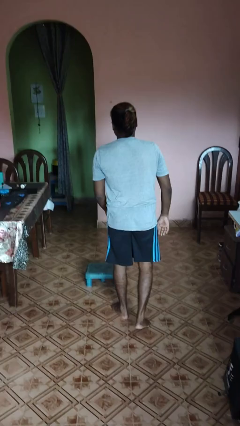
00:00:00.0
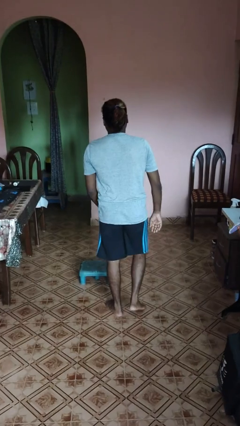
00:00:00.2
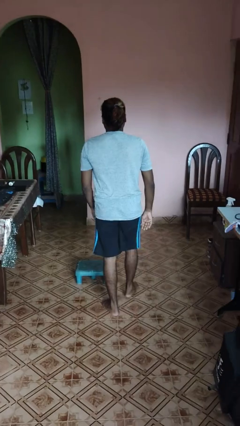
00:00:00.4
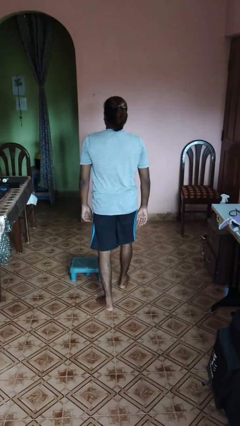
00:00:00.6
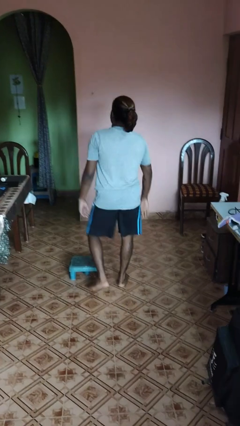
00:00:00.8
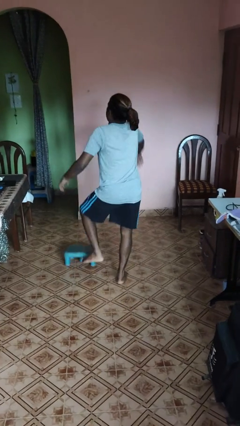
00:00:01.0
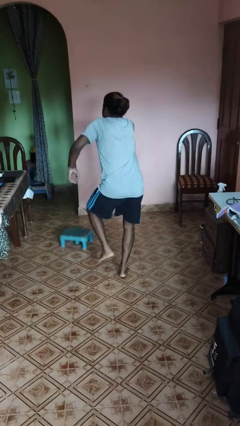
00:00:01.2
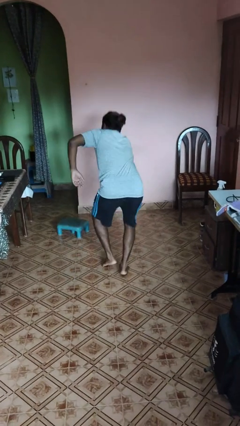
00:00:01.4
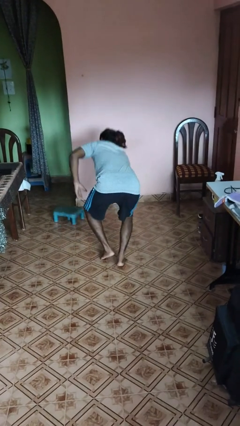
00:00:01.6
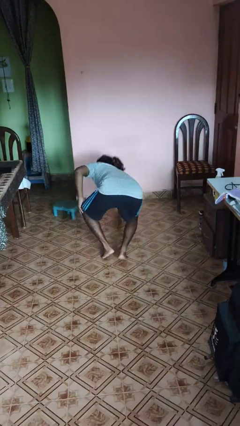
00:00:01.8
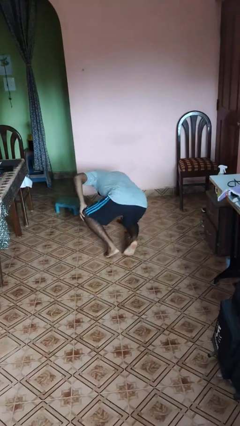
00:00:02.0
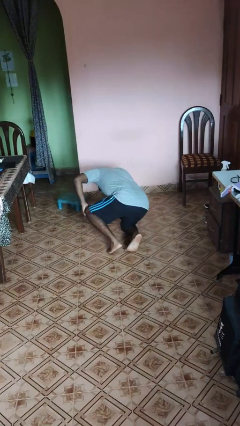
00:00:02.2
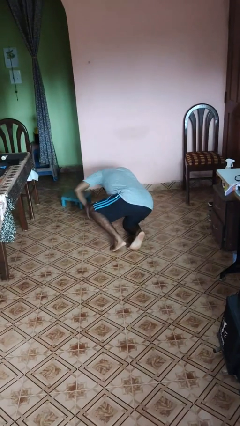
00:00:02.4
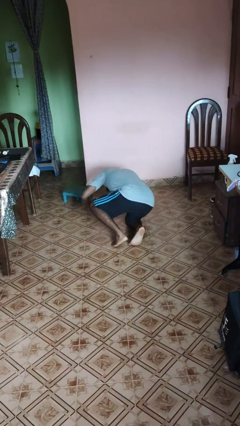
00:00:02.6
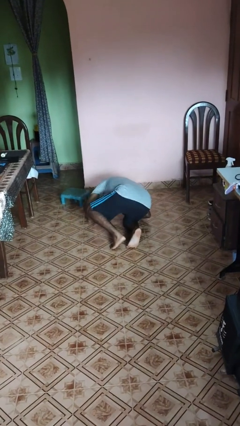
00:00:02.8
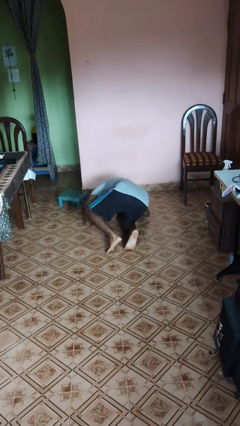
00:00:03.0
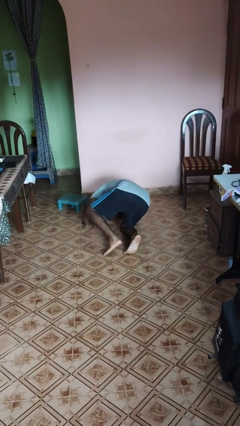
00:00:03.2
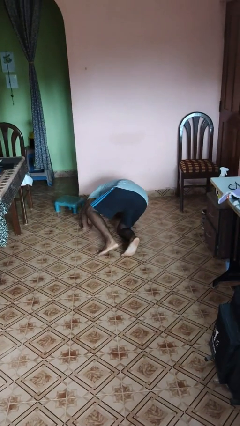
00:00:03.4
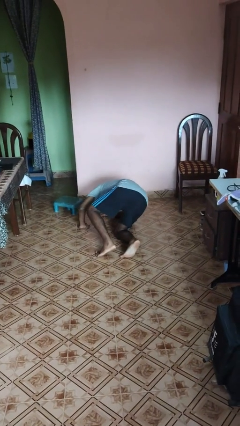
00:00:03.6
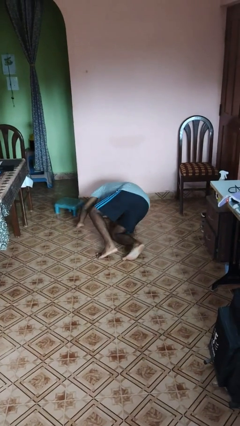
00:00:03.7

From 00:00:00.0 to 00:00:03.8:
person trips on object on floor

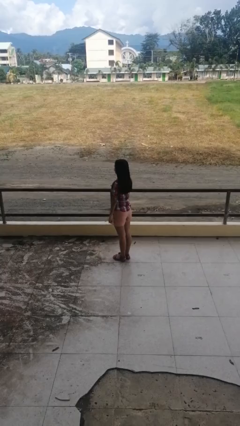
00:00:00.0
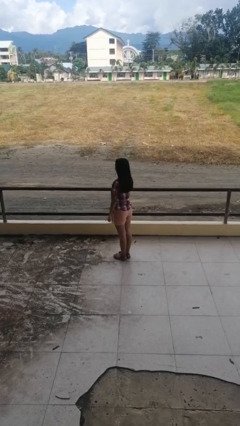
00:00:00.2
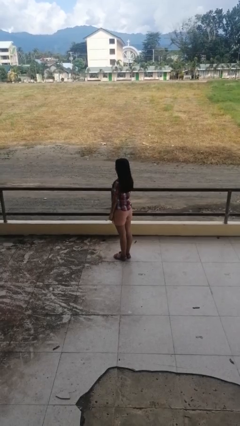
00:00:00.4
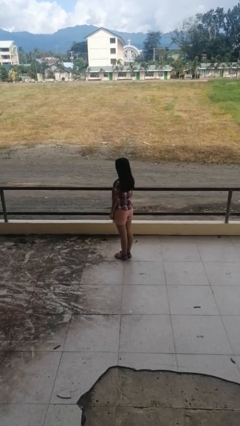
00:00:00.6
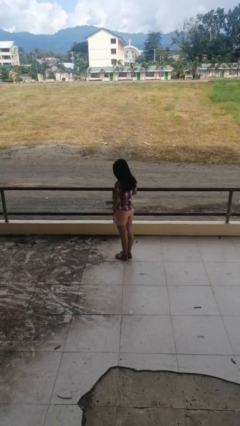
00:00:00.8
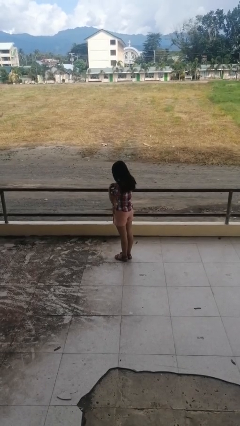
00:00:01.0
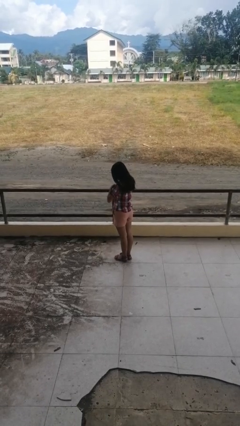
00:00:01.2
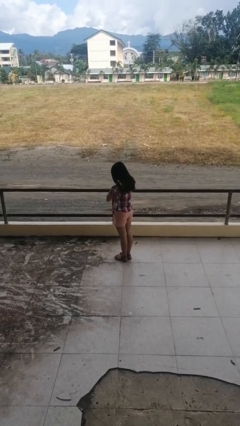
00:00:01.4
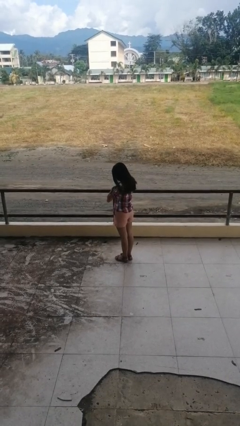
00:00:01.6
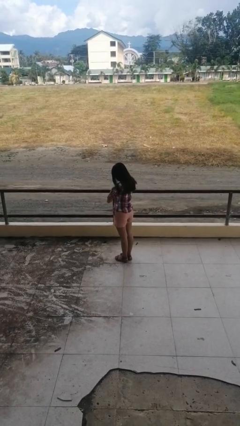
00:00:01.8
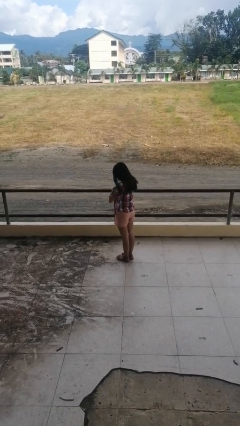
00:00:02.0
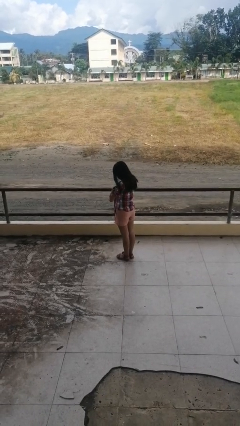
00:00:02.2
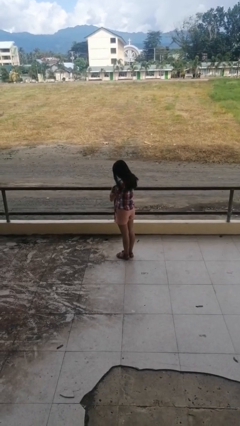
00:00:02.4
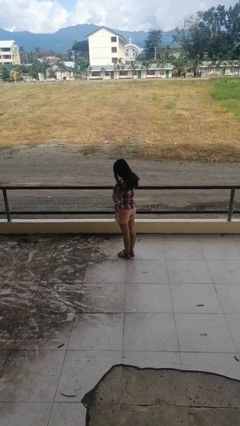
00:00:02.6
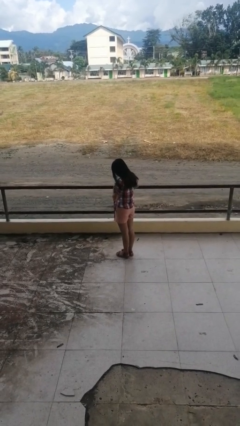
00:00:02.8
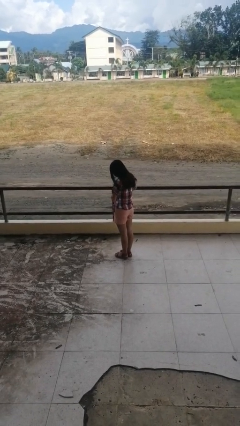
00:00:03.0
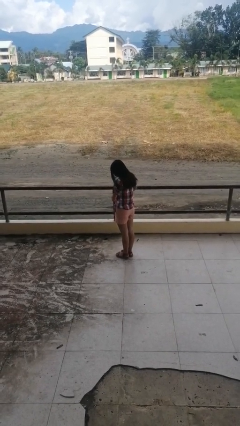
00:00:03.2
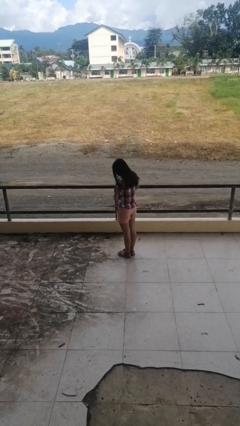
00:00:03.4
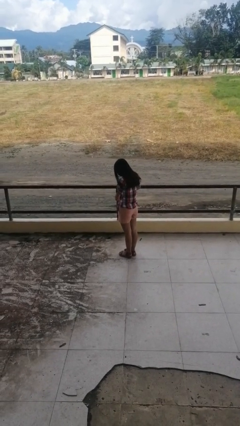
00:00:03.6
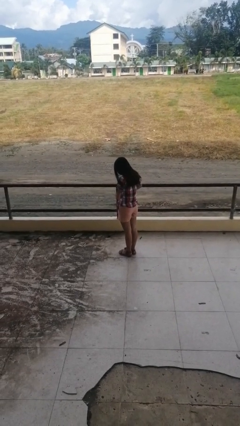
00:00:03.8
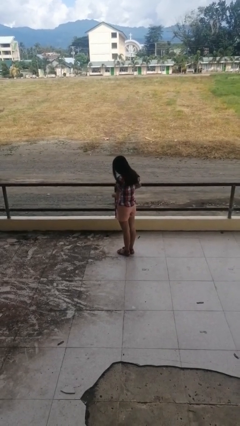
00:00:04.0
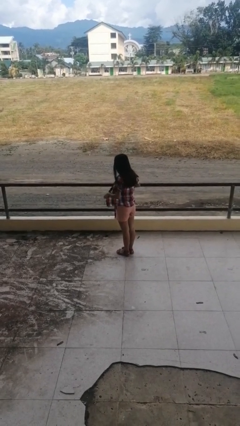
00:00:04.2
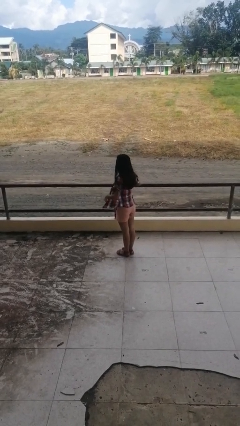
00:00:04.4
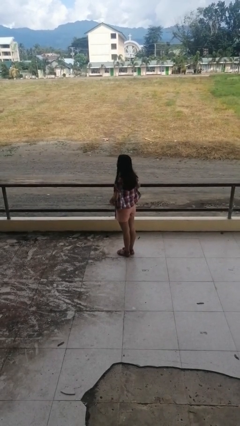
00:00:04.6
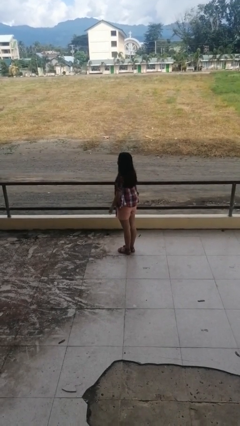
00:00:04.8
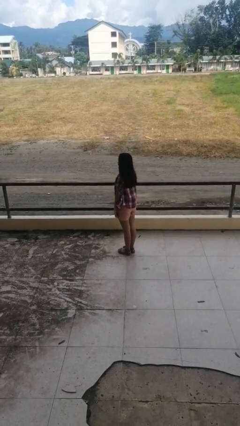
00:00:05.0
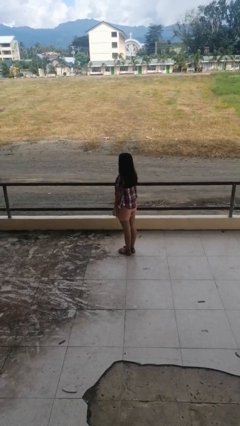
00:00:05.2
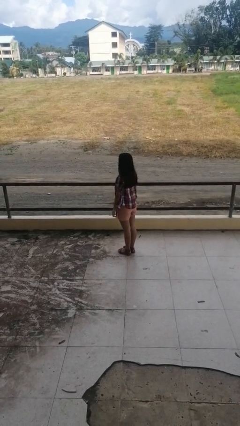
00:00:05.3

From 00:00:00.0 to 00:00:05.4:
person unbuttons shirt

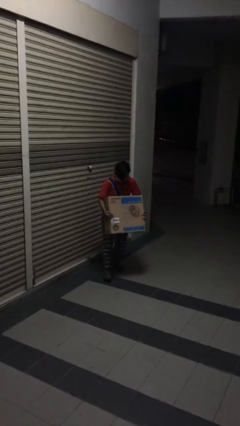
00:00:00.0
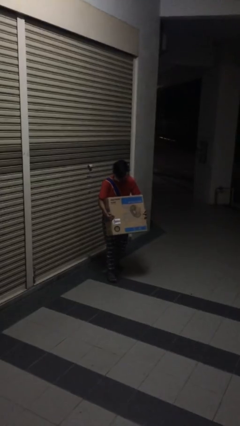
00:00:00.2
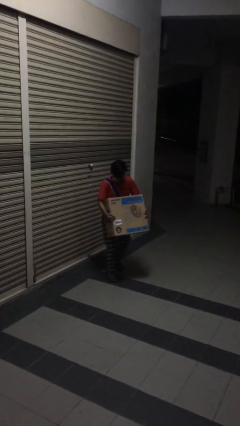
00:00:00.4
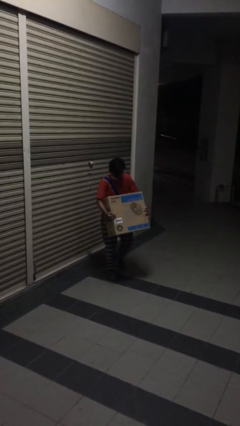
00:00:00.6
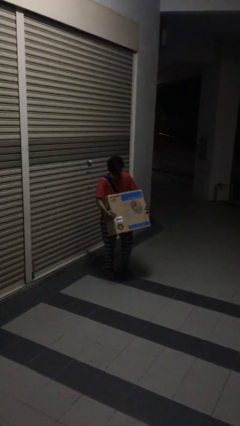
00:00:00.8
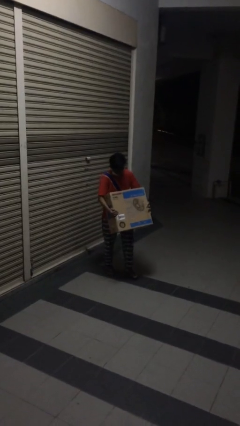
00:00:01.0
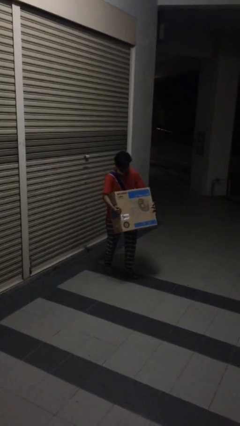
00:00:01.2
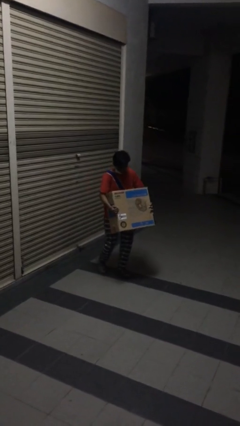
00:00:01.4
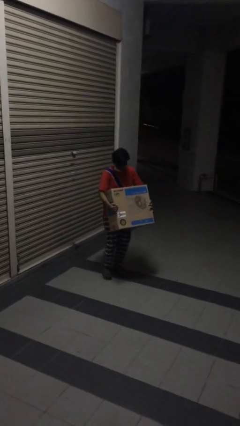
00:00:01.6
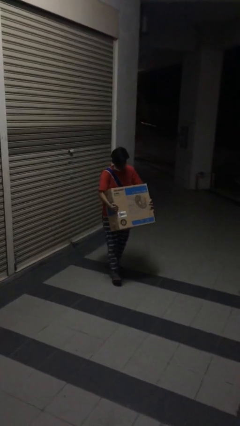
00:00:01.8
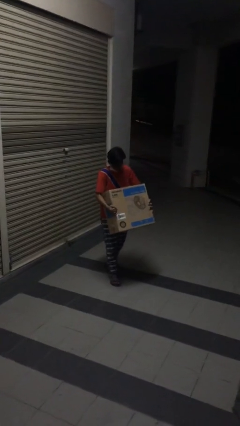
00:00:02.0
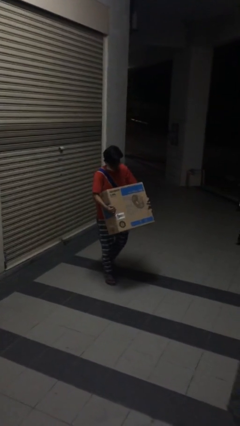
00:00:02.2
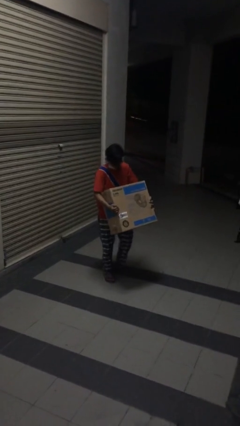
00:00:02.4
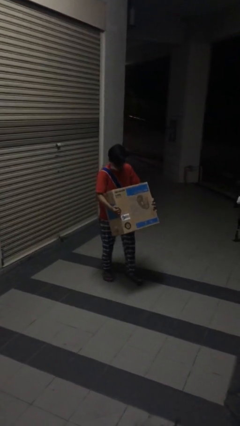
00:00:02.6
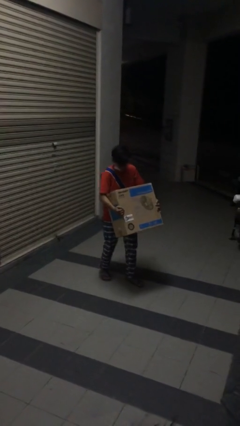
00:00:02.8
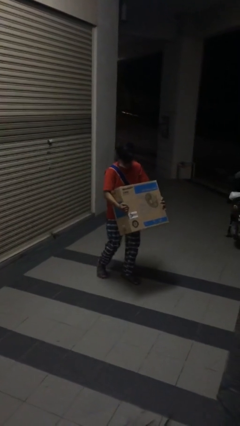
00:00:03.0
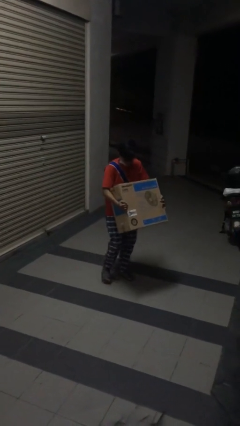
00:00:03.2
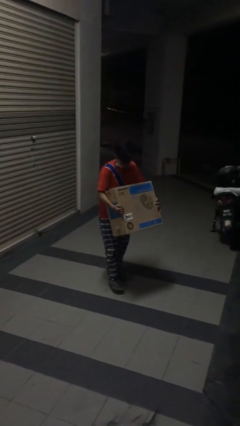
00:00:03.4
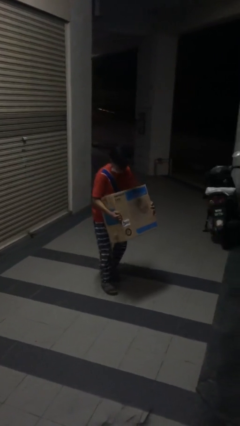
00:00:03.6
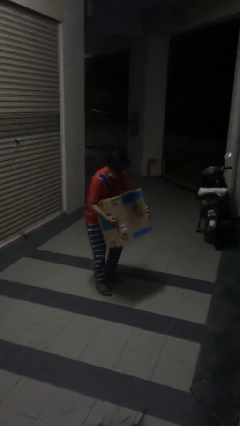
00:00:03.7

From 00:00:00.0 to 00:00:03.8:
person carries heavy object

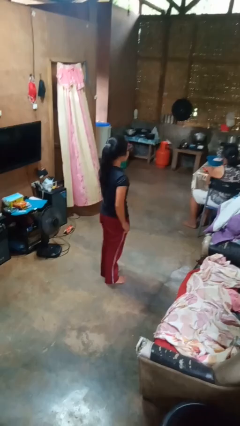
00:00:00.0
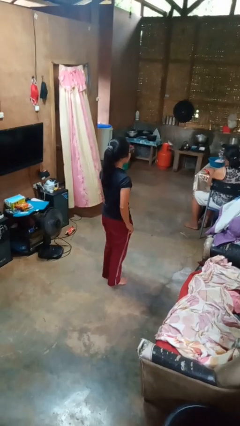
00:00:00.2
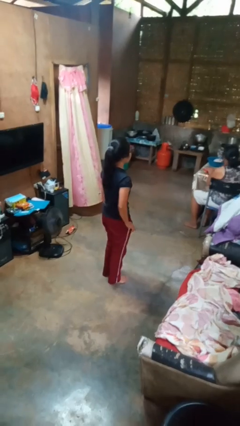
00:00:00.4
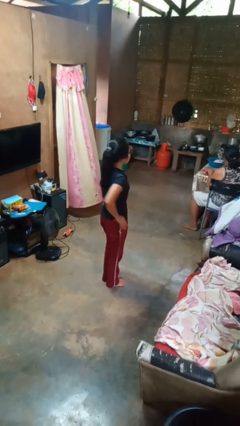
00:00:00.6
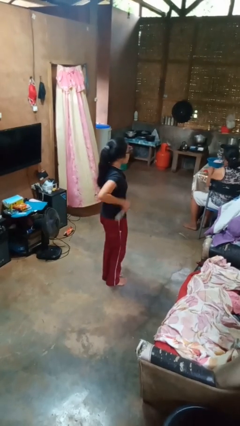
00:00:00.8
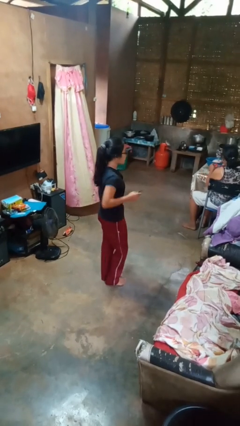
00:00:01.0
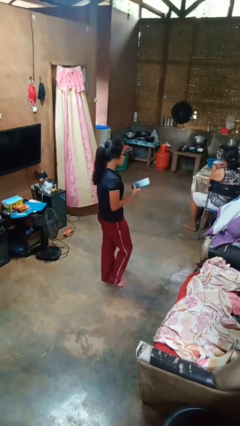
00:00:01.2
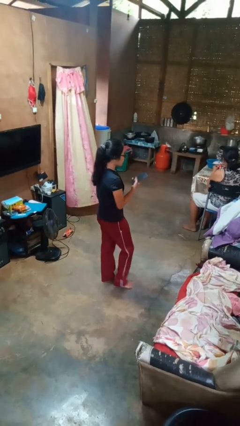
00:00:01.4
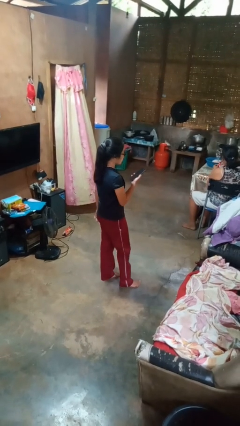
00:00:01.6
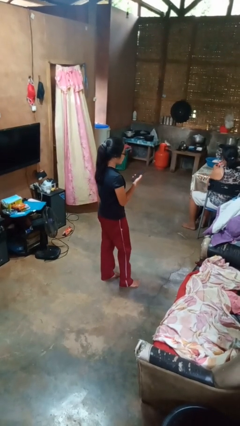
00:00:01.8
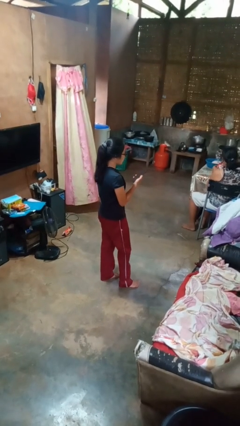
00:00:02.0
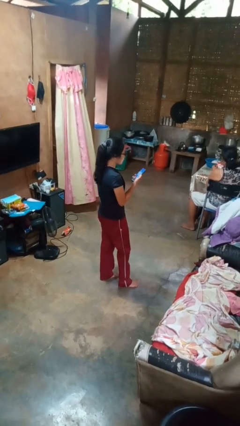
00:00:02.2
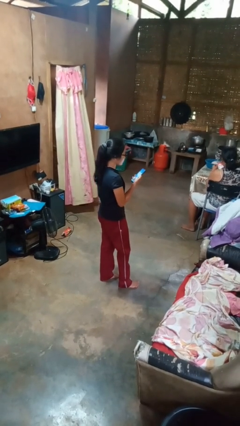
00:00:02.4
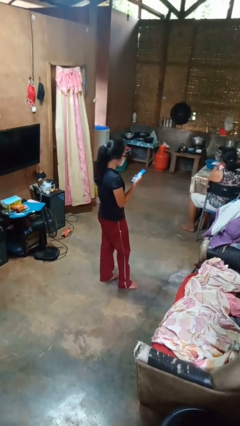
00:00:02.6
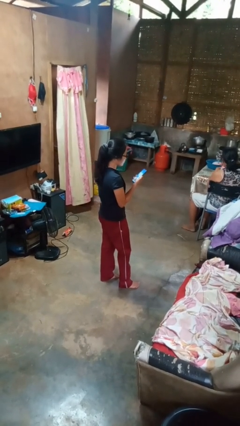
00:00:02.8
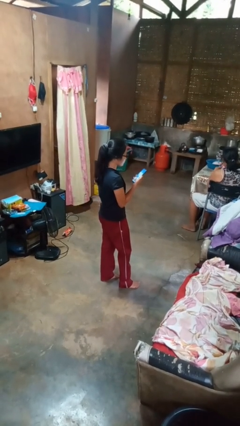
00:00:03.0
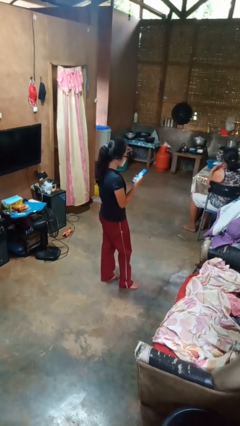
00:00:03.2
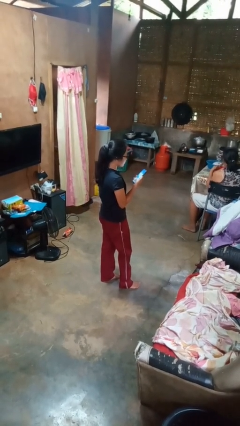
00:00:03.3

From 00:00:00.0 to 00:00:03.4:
person takes phone from pocket

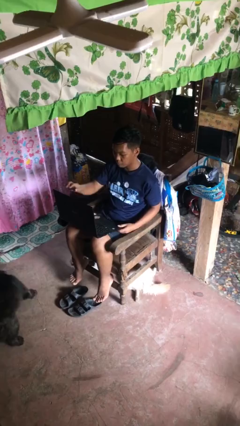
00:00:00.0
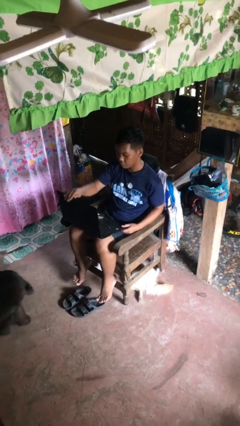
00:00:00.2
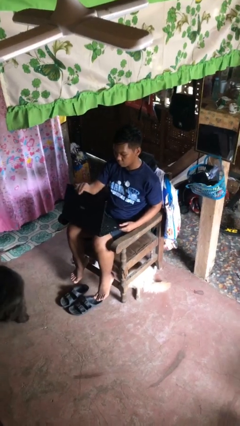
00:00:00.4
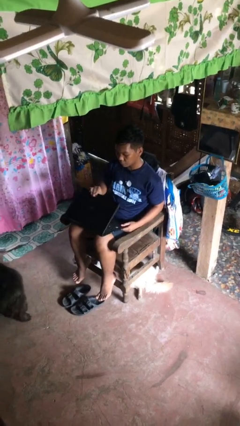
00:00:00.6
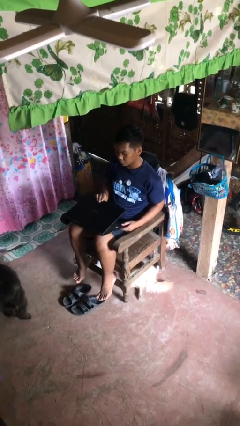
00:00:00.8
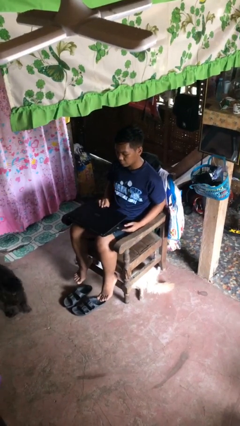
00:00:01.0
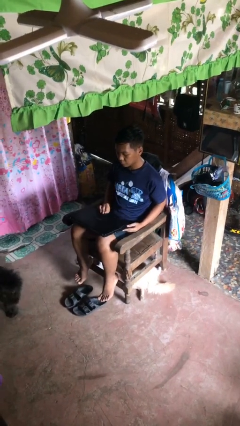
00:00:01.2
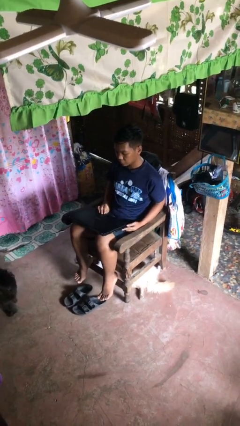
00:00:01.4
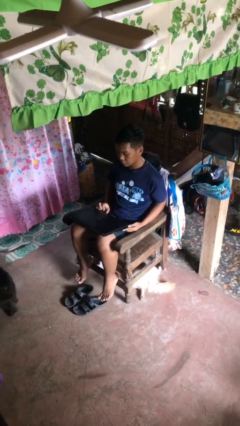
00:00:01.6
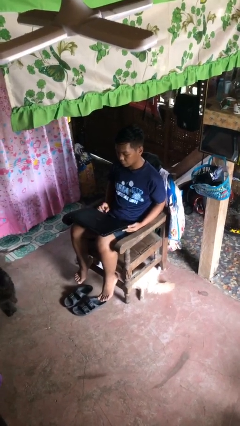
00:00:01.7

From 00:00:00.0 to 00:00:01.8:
person closes laptop
